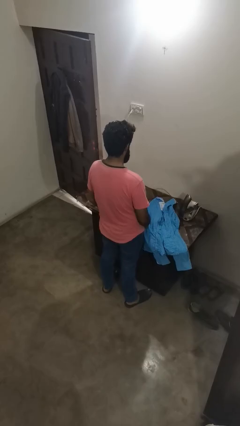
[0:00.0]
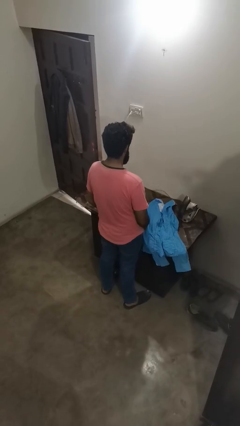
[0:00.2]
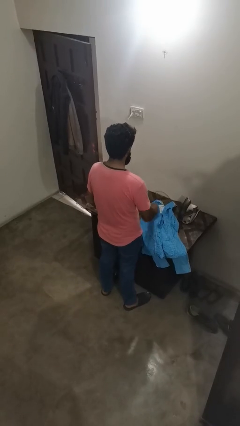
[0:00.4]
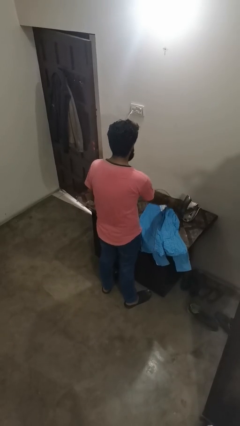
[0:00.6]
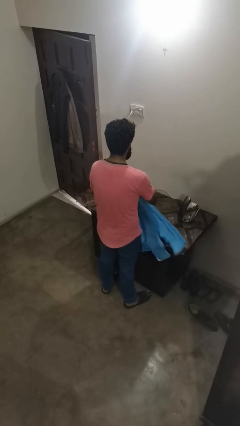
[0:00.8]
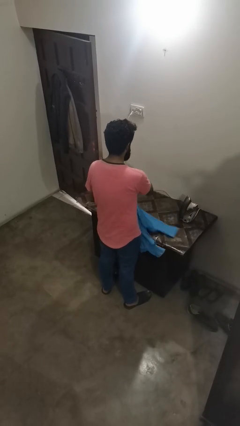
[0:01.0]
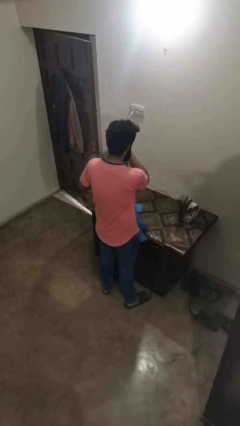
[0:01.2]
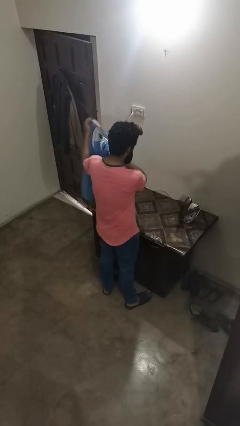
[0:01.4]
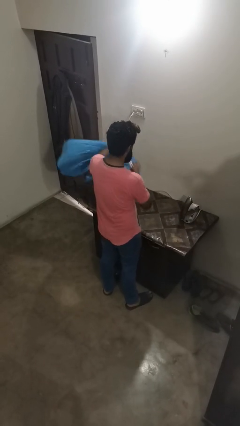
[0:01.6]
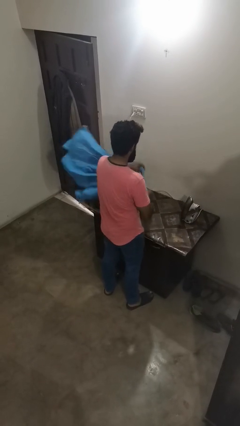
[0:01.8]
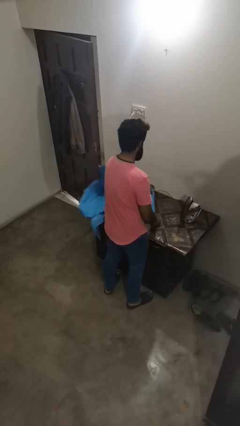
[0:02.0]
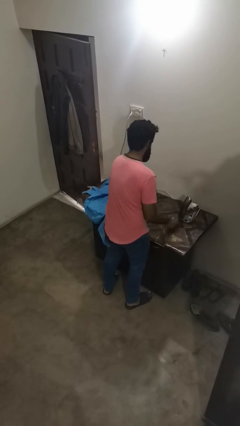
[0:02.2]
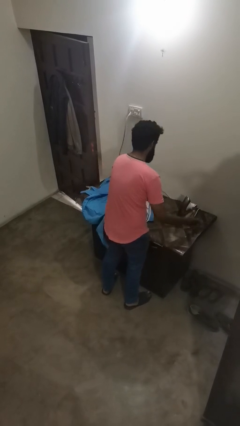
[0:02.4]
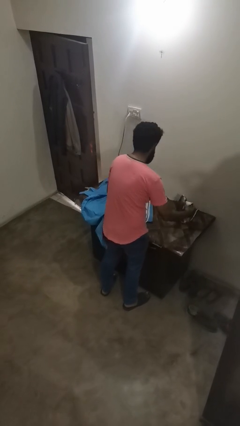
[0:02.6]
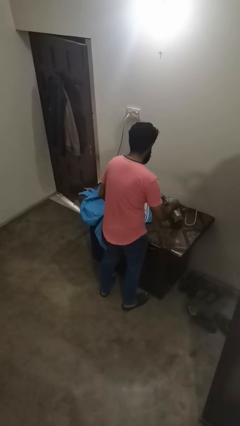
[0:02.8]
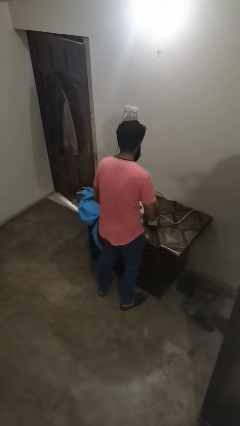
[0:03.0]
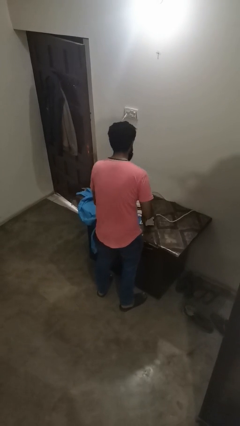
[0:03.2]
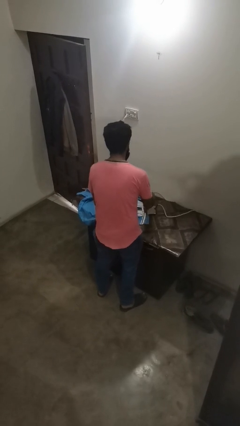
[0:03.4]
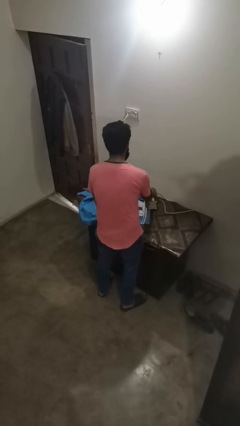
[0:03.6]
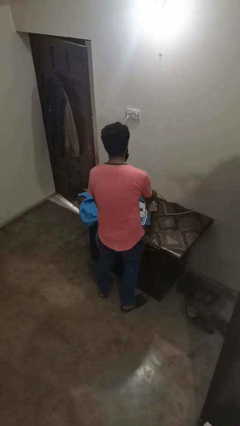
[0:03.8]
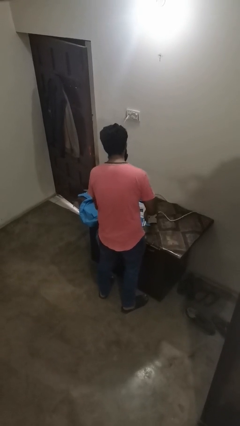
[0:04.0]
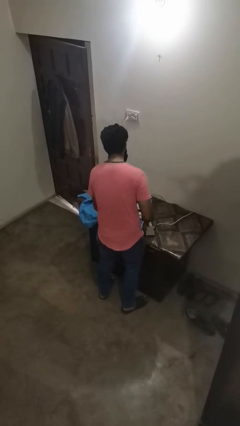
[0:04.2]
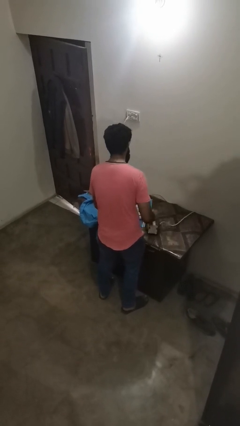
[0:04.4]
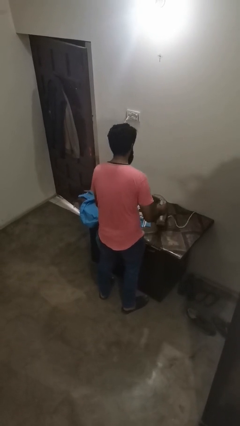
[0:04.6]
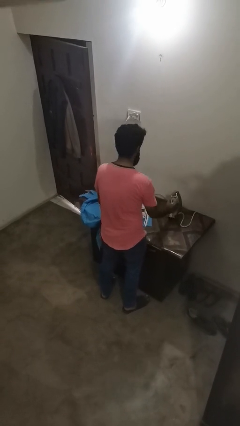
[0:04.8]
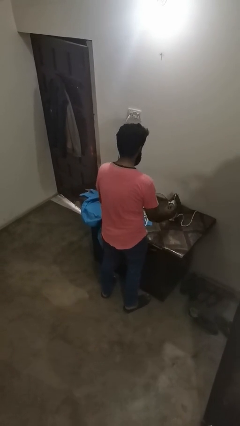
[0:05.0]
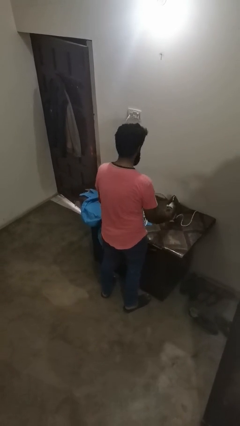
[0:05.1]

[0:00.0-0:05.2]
person irons clothes

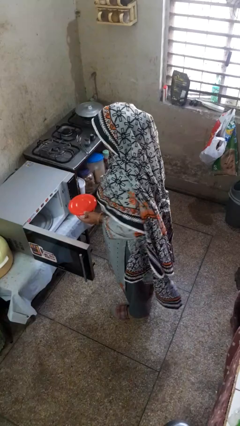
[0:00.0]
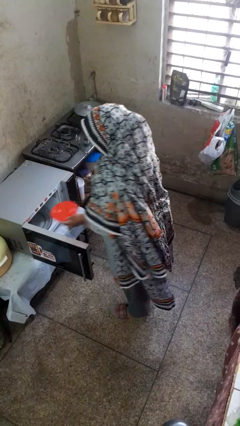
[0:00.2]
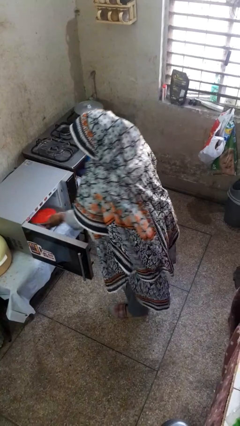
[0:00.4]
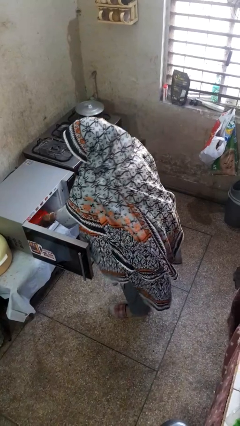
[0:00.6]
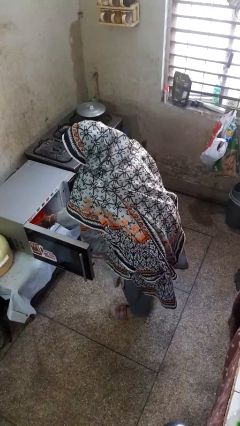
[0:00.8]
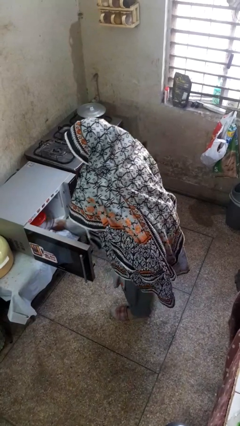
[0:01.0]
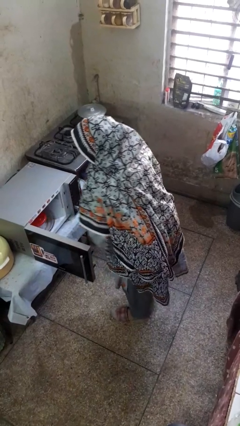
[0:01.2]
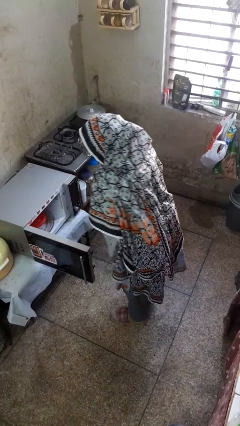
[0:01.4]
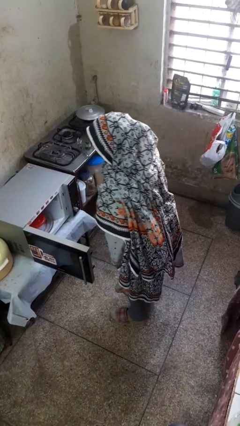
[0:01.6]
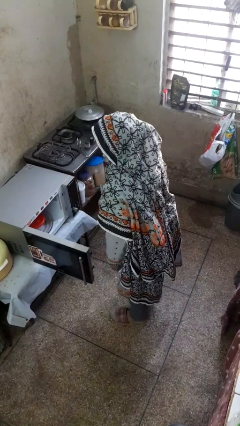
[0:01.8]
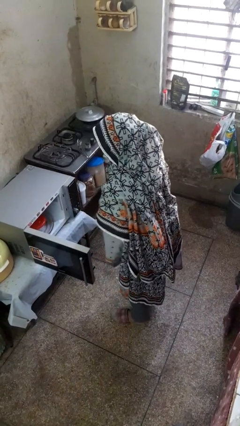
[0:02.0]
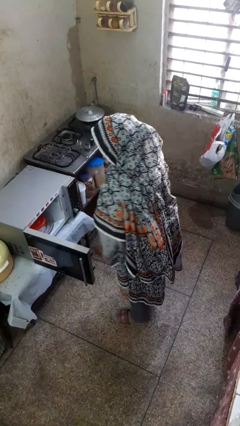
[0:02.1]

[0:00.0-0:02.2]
person puts object into microwave

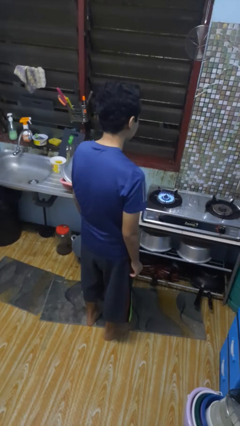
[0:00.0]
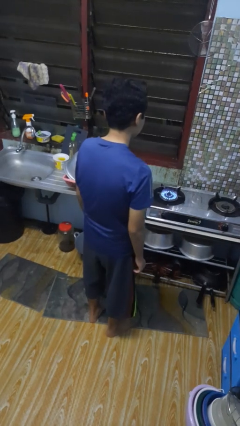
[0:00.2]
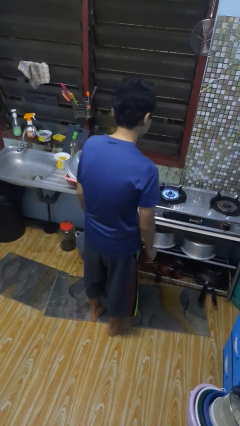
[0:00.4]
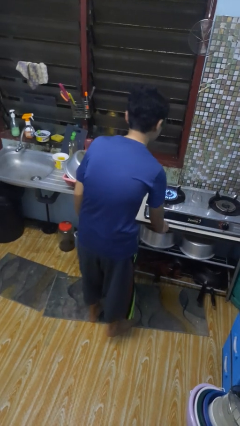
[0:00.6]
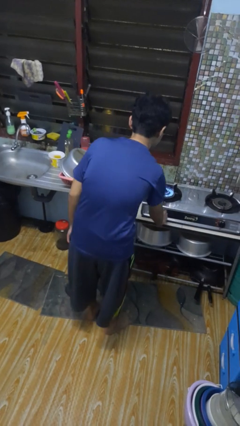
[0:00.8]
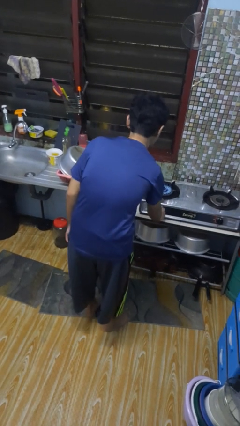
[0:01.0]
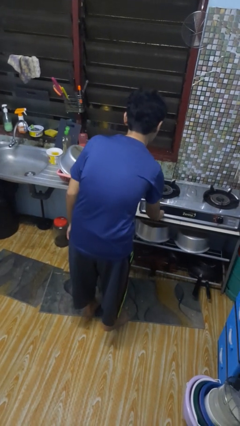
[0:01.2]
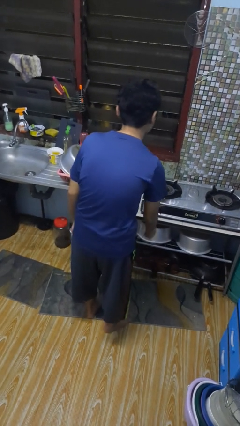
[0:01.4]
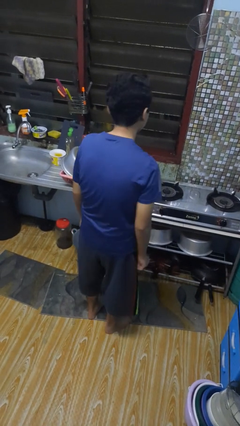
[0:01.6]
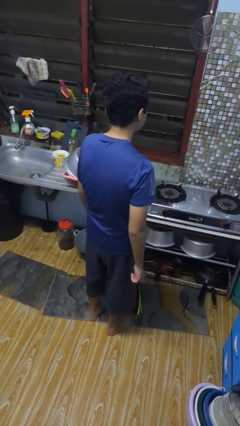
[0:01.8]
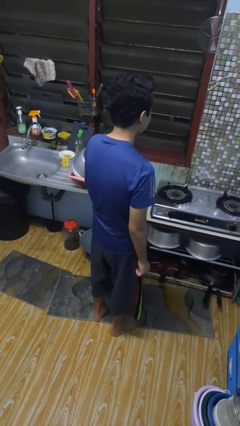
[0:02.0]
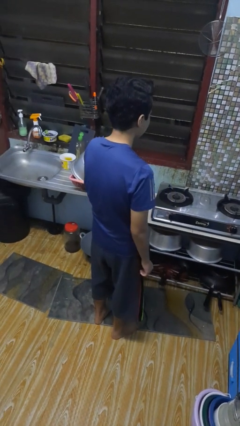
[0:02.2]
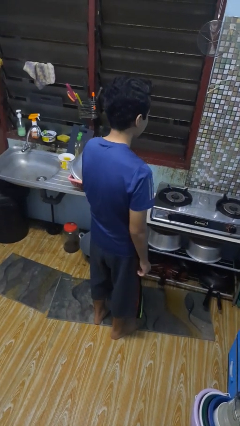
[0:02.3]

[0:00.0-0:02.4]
person turns off stovetop

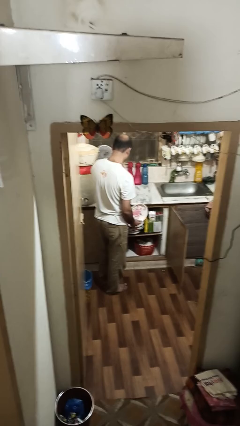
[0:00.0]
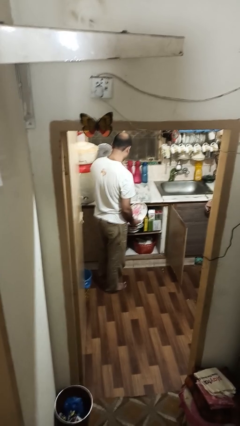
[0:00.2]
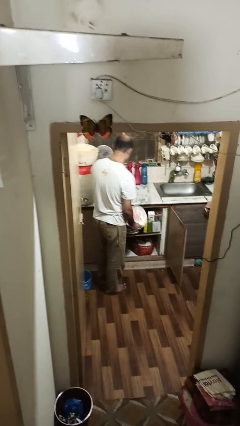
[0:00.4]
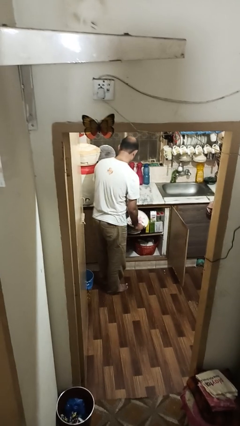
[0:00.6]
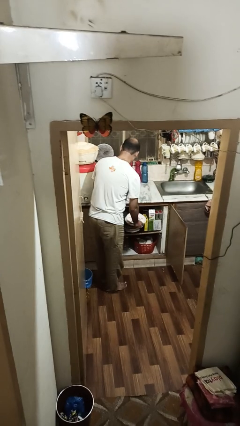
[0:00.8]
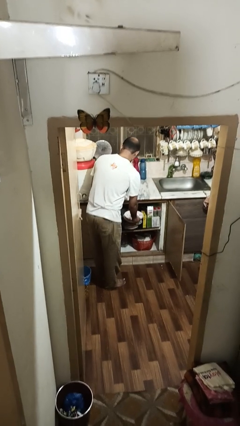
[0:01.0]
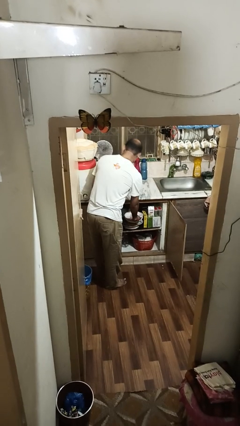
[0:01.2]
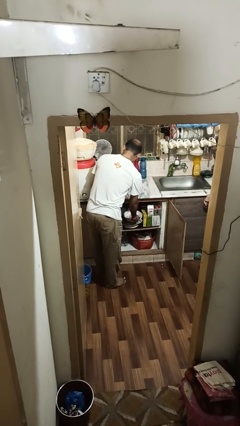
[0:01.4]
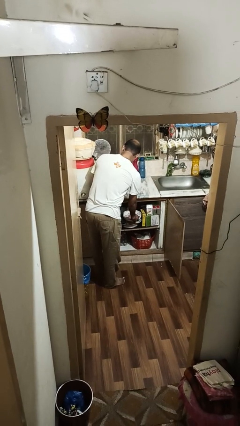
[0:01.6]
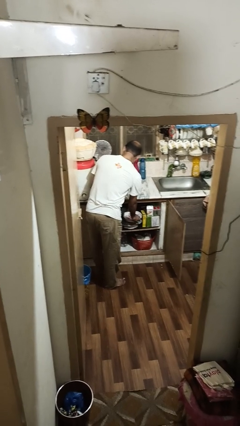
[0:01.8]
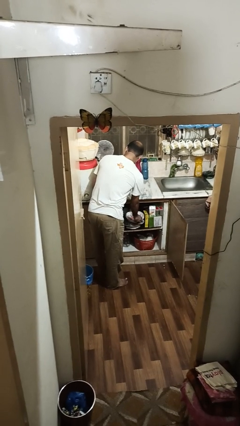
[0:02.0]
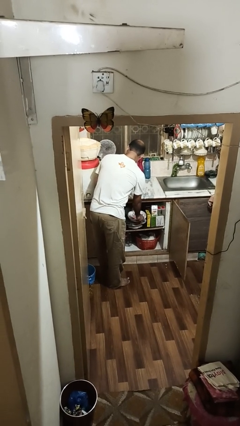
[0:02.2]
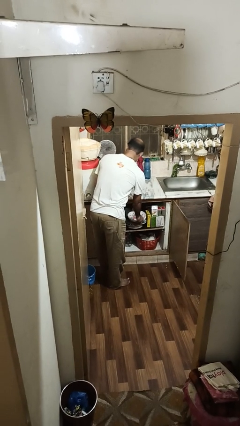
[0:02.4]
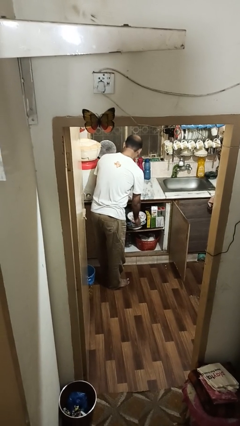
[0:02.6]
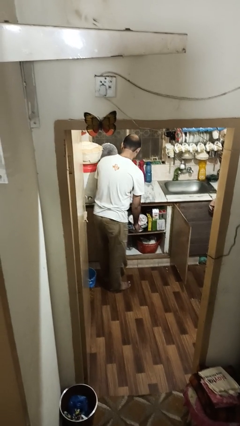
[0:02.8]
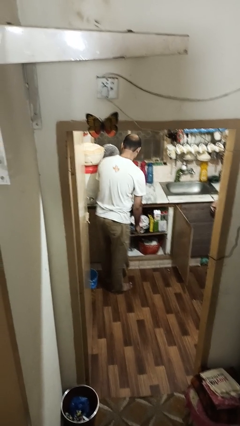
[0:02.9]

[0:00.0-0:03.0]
person puts object in cabinet

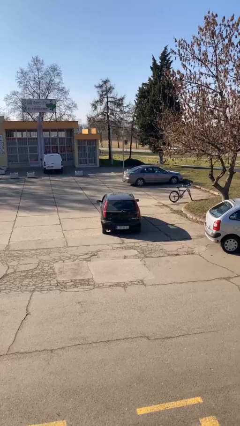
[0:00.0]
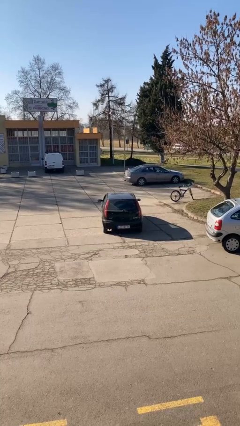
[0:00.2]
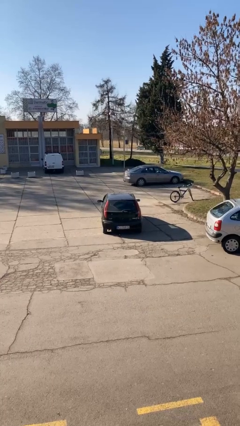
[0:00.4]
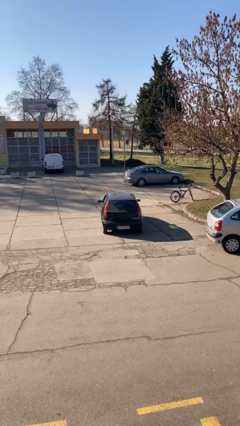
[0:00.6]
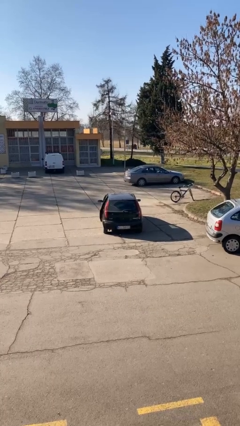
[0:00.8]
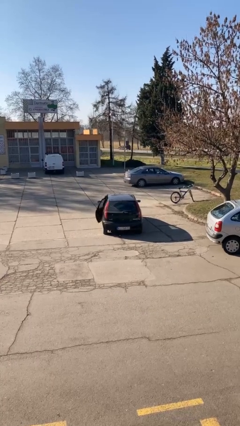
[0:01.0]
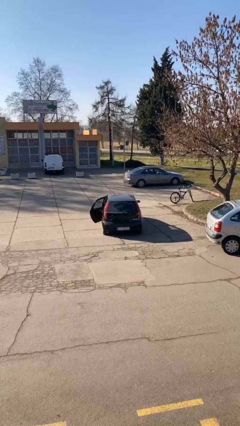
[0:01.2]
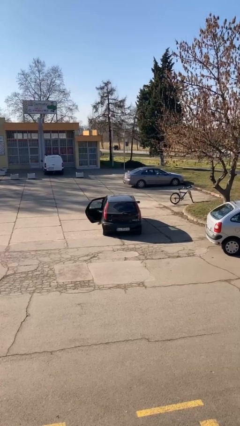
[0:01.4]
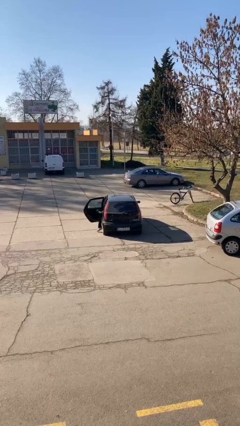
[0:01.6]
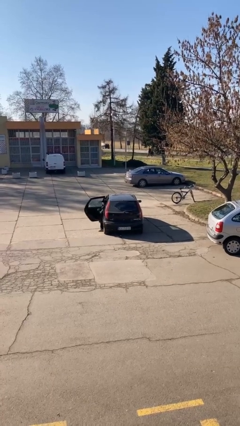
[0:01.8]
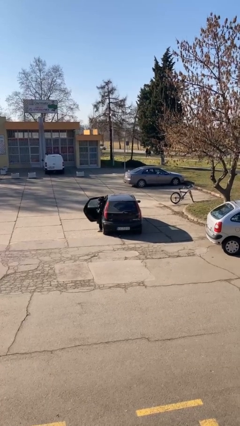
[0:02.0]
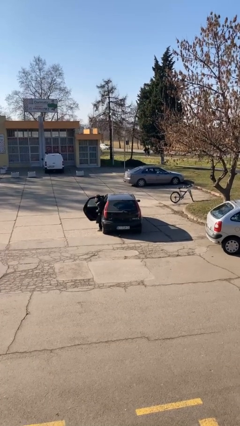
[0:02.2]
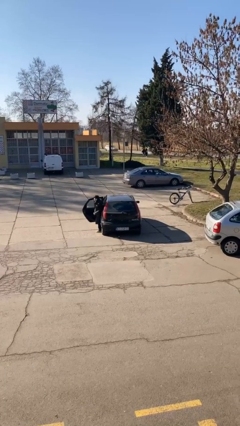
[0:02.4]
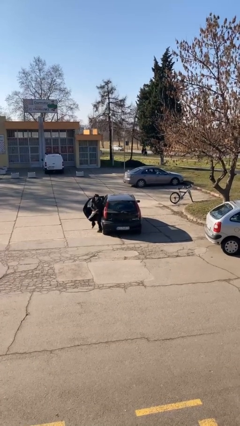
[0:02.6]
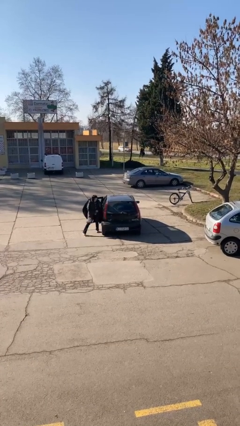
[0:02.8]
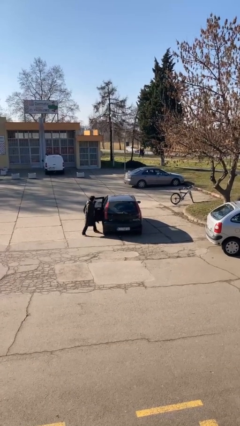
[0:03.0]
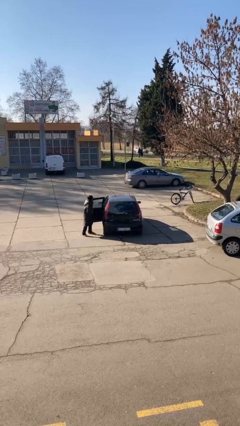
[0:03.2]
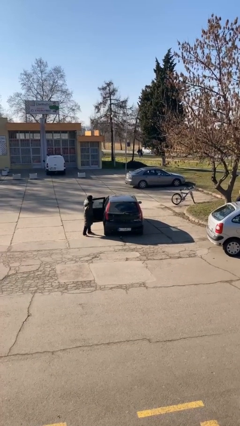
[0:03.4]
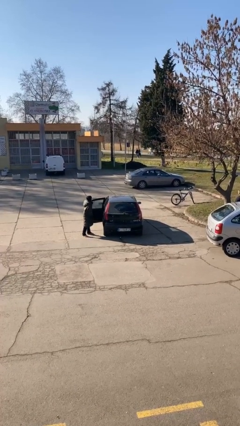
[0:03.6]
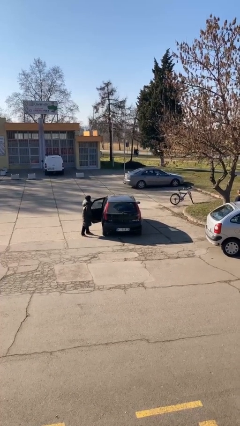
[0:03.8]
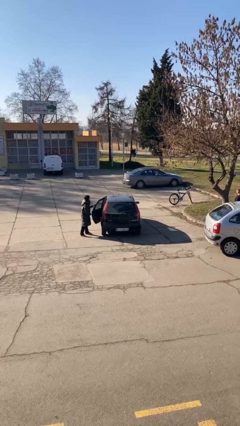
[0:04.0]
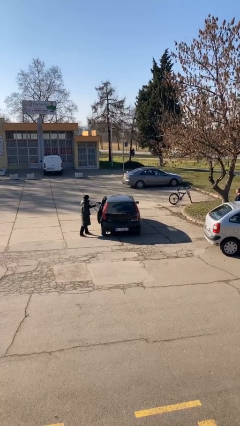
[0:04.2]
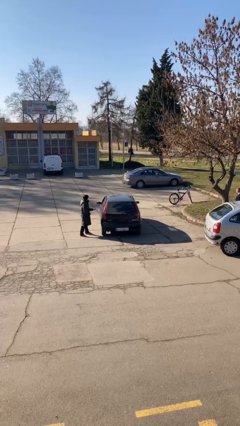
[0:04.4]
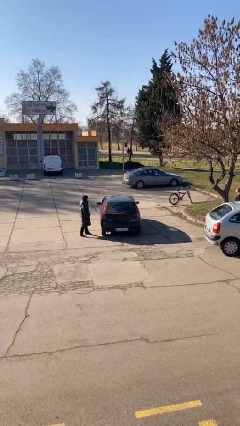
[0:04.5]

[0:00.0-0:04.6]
car drops off person
